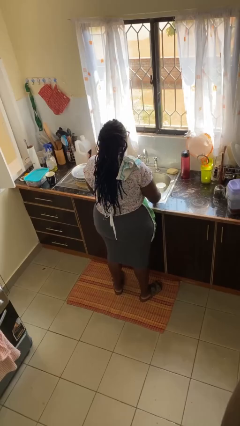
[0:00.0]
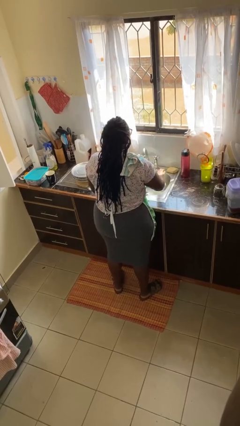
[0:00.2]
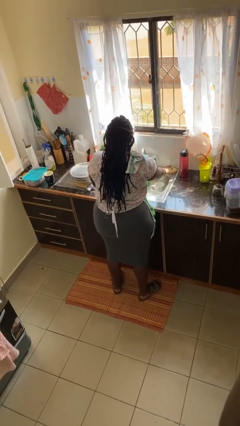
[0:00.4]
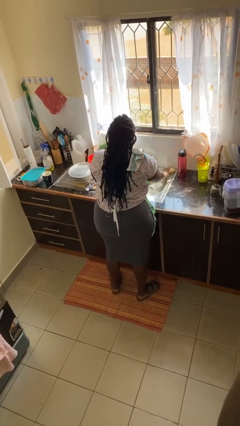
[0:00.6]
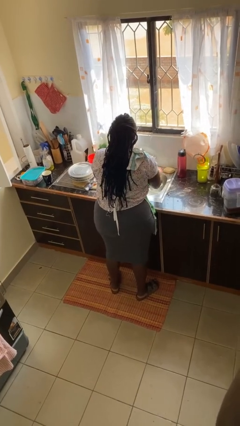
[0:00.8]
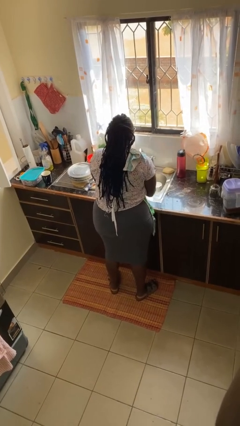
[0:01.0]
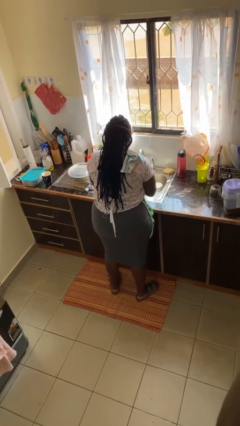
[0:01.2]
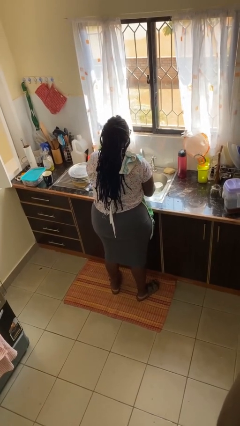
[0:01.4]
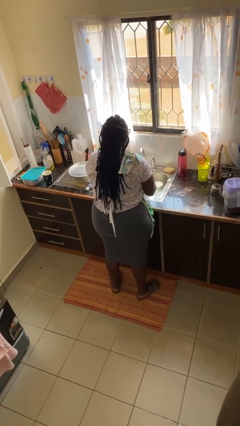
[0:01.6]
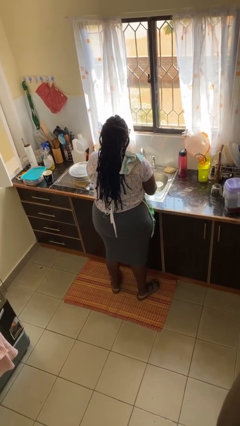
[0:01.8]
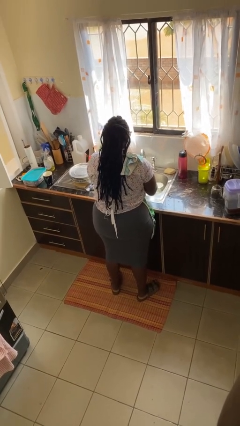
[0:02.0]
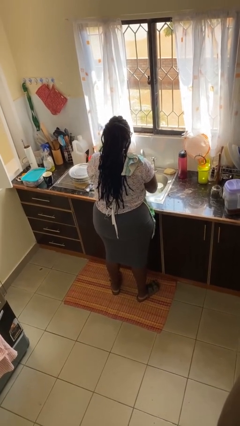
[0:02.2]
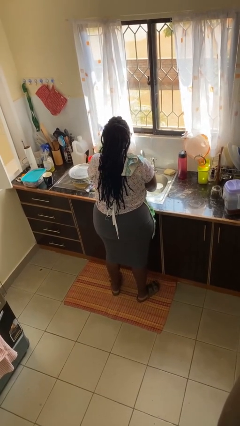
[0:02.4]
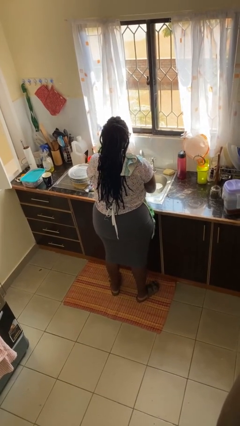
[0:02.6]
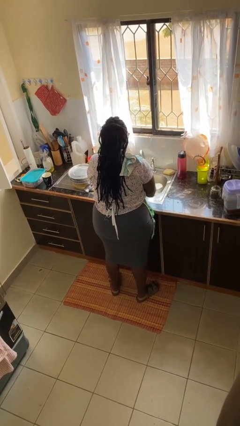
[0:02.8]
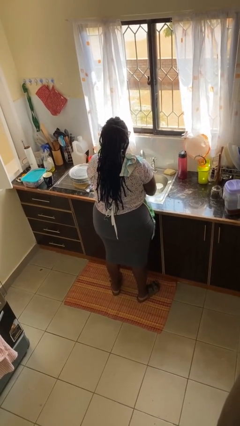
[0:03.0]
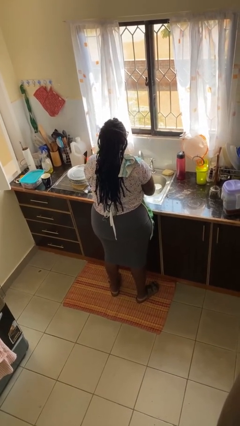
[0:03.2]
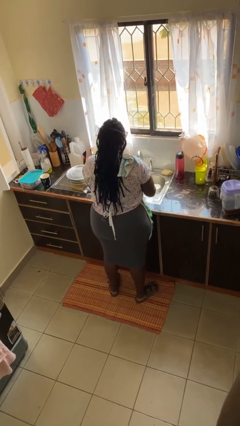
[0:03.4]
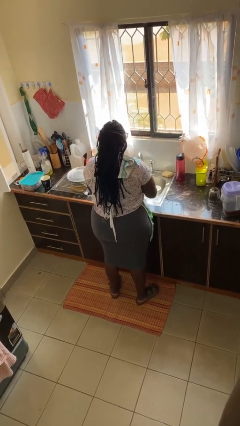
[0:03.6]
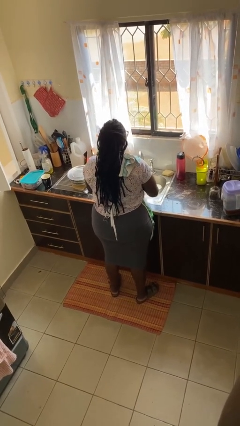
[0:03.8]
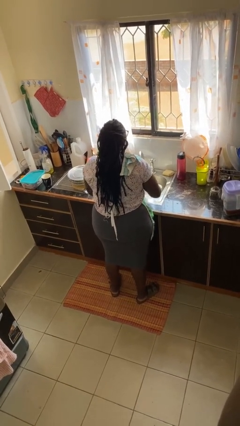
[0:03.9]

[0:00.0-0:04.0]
person washes hands

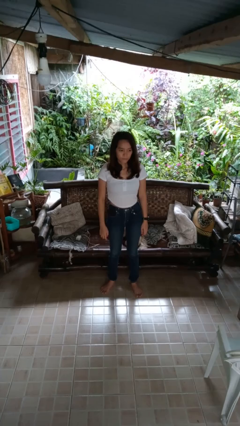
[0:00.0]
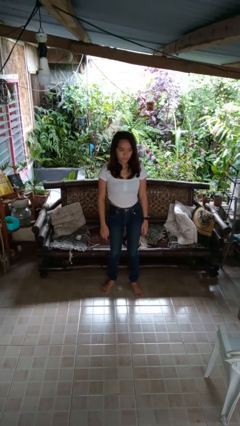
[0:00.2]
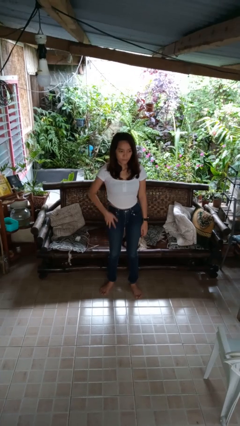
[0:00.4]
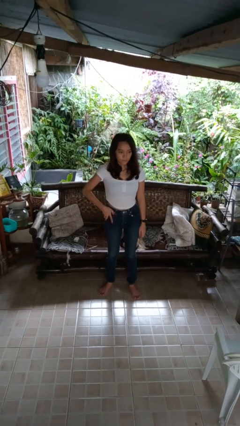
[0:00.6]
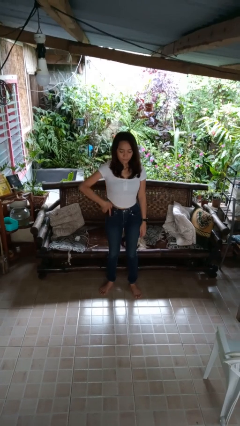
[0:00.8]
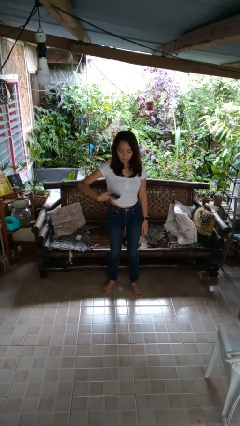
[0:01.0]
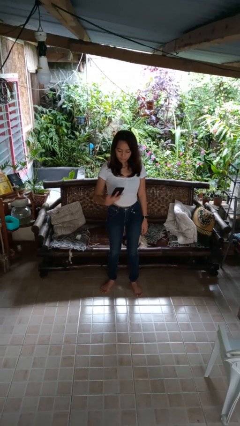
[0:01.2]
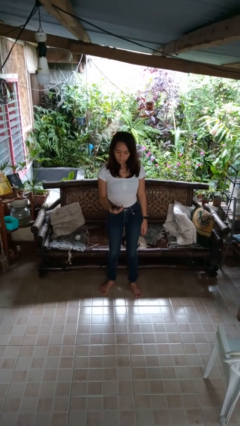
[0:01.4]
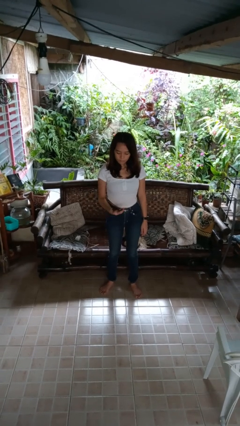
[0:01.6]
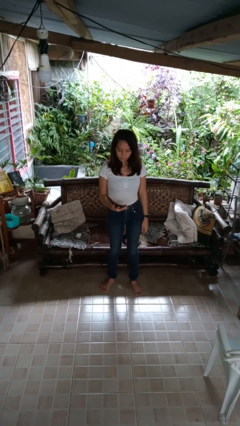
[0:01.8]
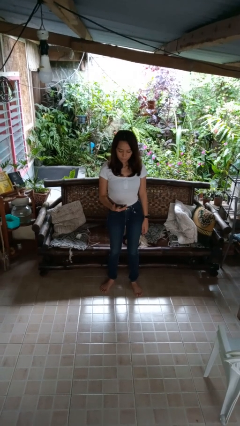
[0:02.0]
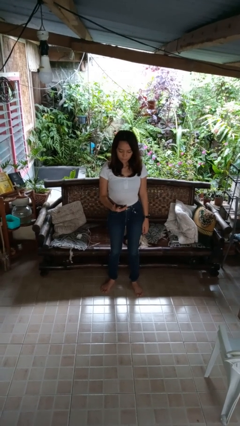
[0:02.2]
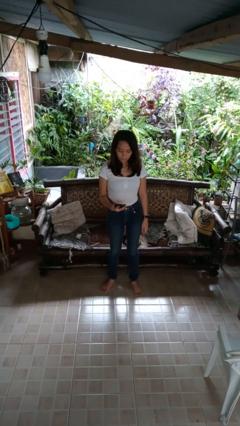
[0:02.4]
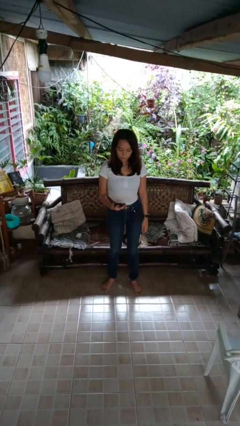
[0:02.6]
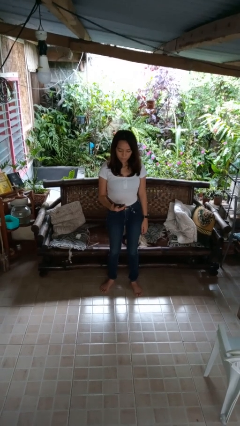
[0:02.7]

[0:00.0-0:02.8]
person takes phone from pocket

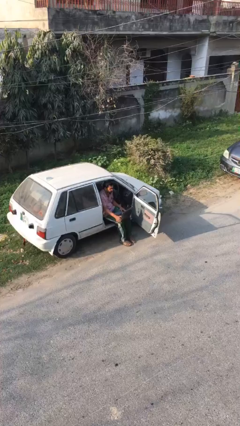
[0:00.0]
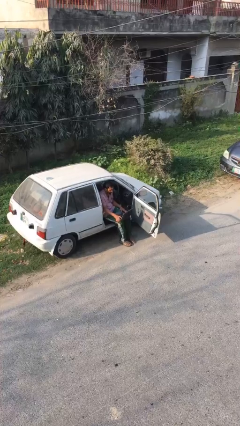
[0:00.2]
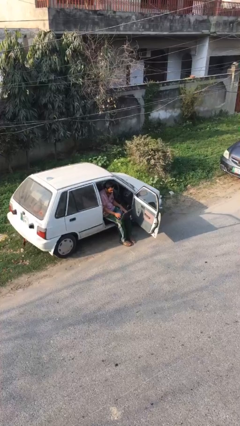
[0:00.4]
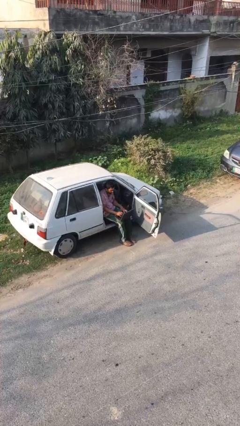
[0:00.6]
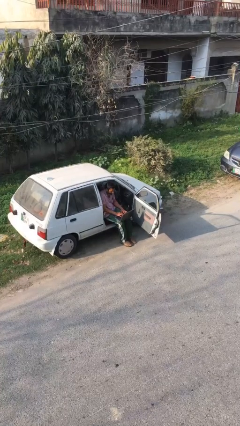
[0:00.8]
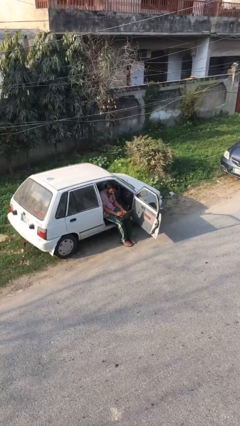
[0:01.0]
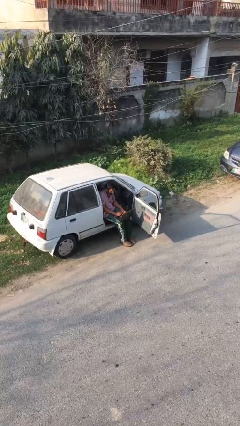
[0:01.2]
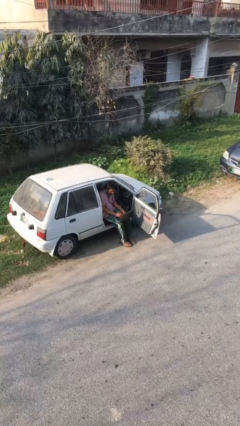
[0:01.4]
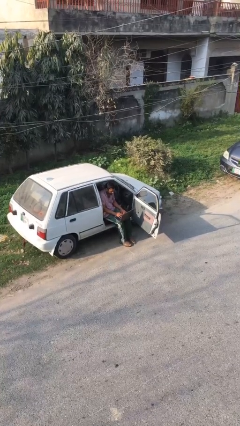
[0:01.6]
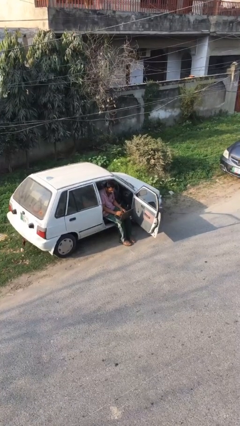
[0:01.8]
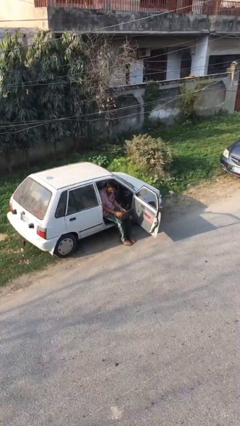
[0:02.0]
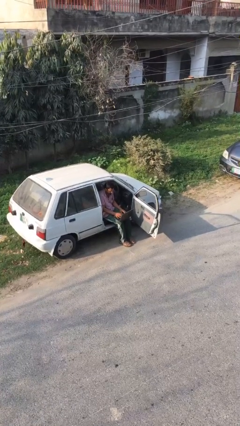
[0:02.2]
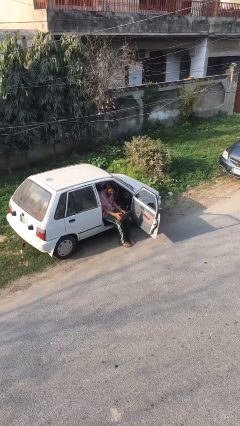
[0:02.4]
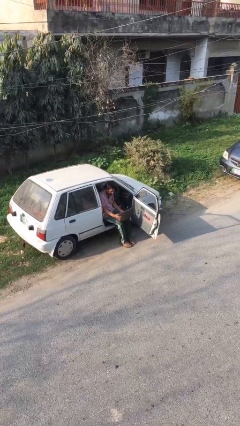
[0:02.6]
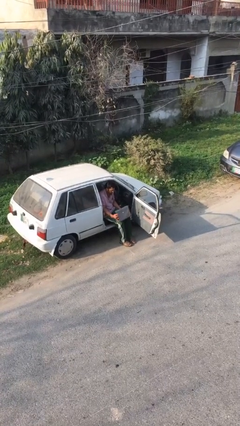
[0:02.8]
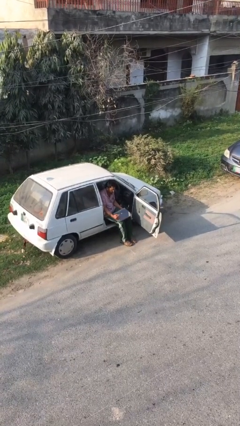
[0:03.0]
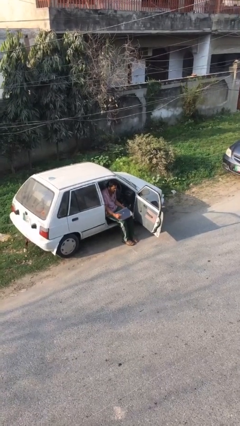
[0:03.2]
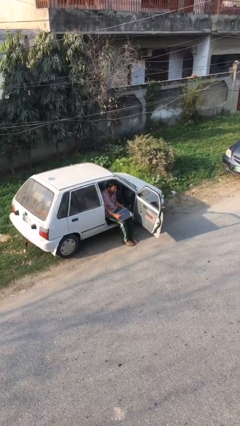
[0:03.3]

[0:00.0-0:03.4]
person interacts with laptop

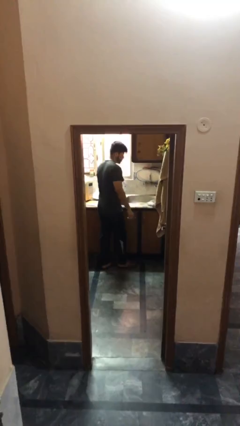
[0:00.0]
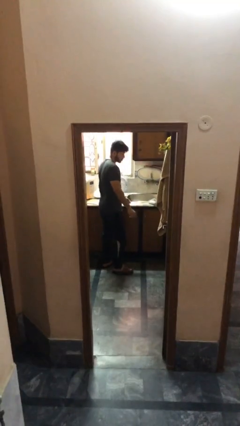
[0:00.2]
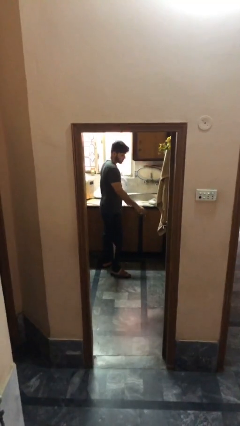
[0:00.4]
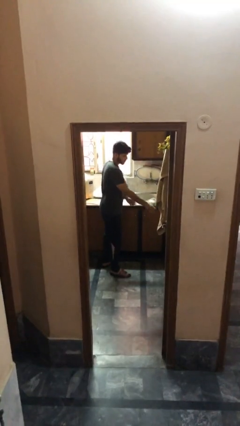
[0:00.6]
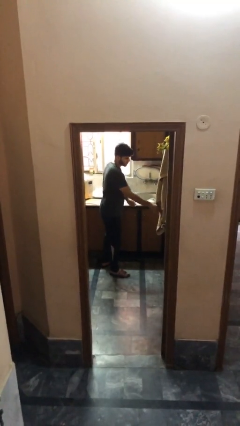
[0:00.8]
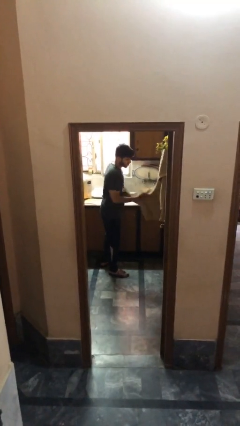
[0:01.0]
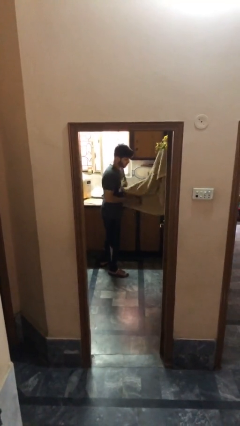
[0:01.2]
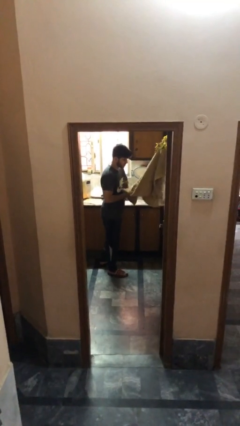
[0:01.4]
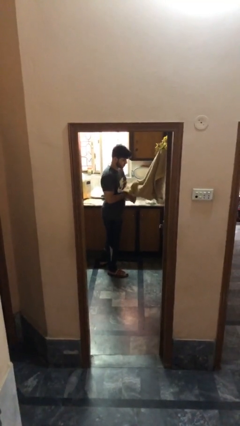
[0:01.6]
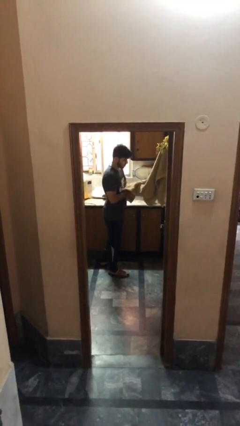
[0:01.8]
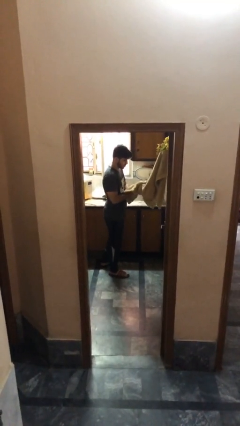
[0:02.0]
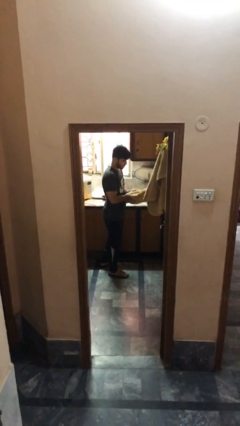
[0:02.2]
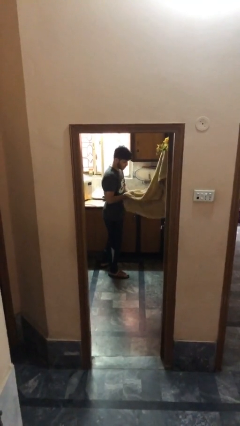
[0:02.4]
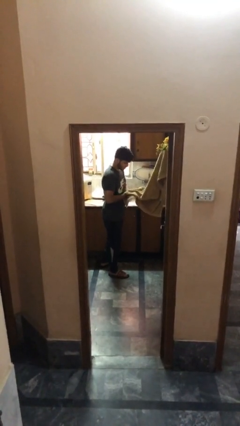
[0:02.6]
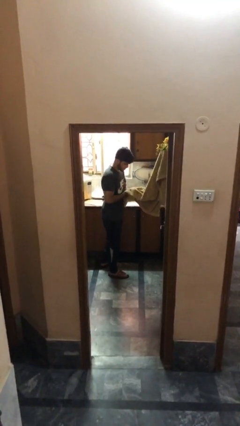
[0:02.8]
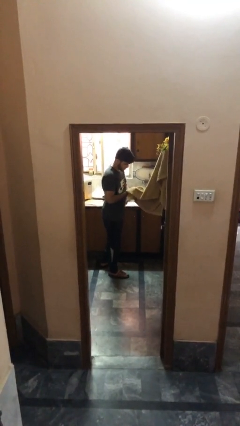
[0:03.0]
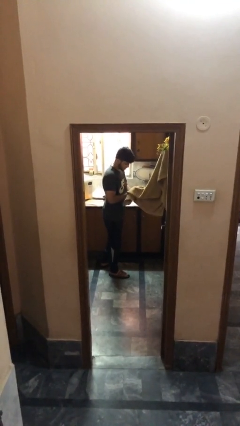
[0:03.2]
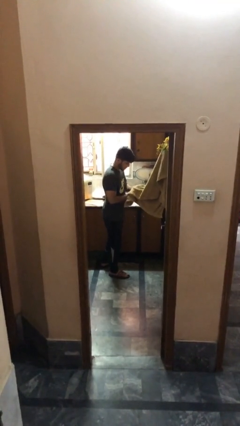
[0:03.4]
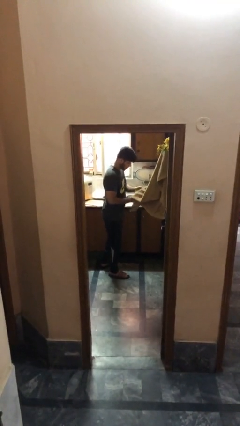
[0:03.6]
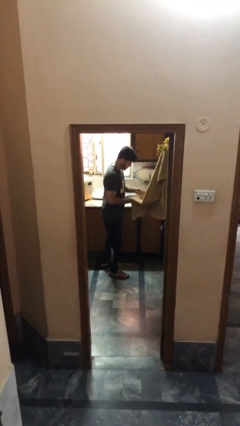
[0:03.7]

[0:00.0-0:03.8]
person dries hands with towel

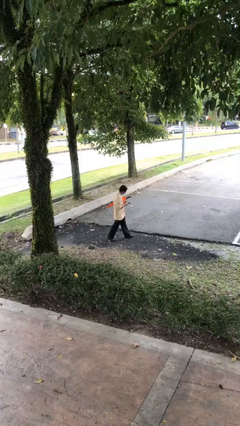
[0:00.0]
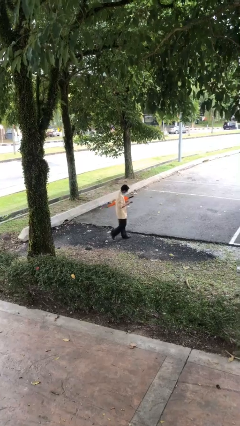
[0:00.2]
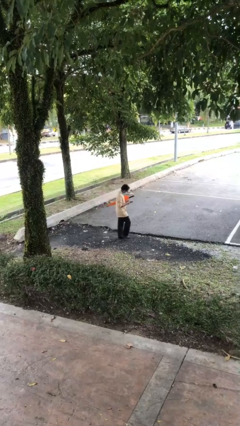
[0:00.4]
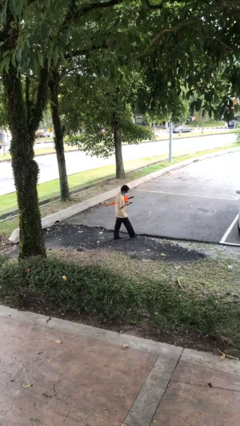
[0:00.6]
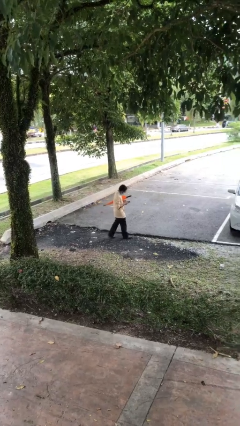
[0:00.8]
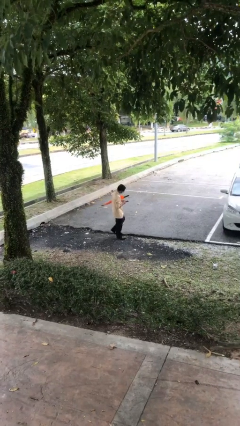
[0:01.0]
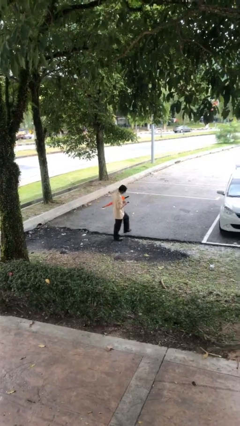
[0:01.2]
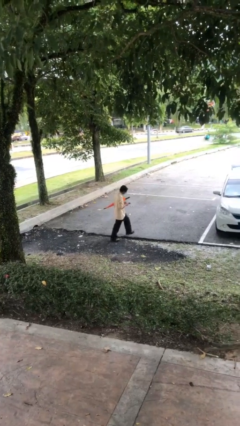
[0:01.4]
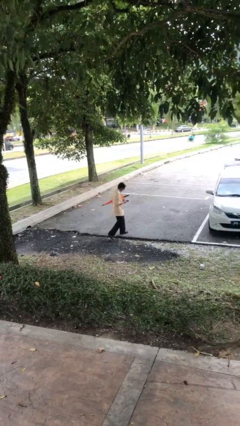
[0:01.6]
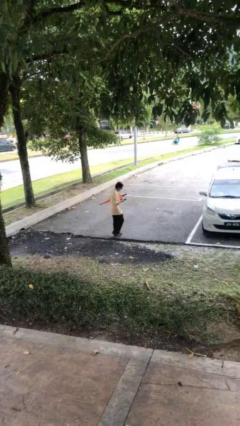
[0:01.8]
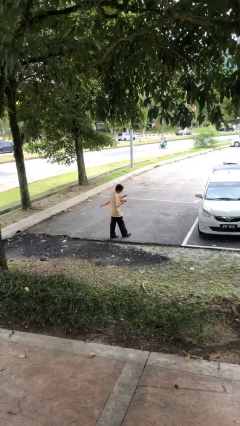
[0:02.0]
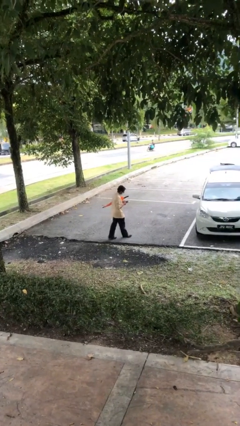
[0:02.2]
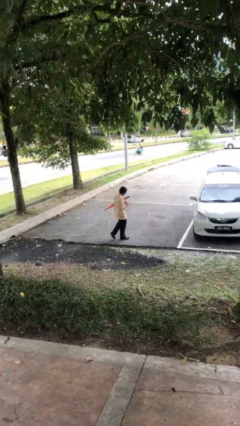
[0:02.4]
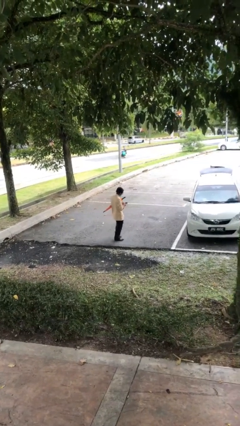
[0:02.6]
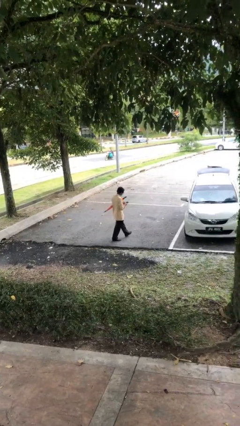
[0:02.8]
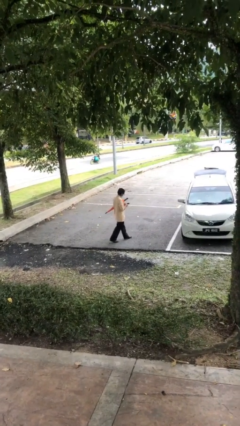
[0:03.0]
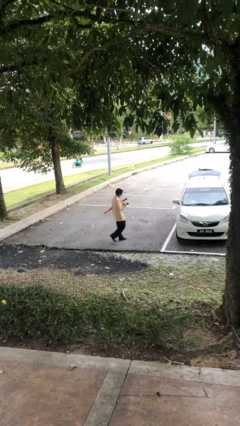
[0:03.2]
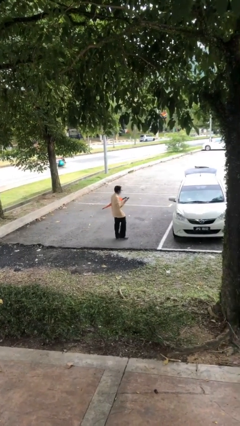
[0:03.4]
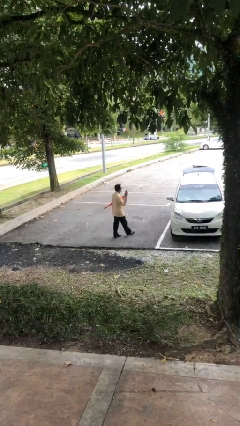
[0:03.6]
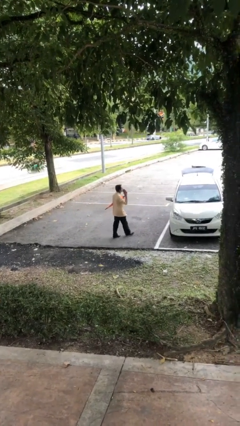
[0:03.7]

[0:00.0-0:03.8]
person texts on phone
